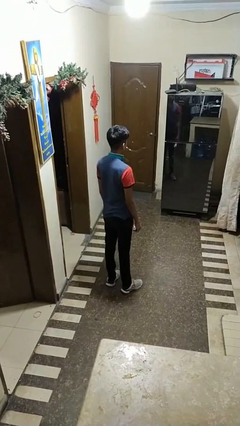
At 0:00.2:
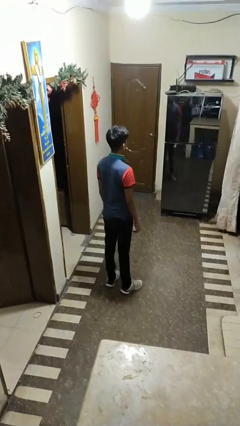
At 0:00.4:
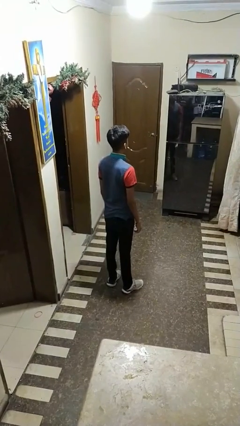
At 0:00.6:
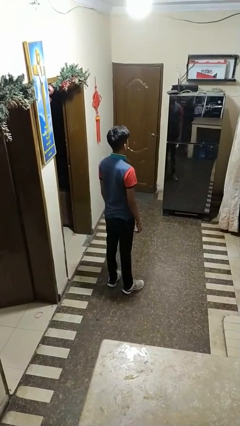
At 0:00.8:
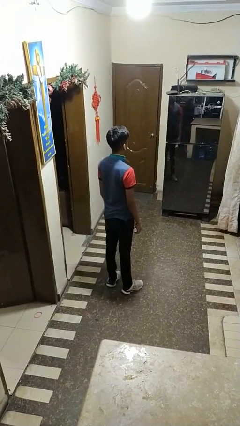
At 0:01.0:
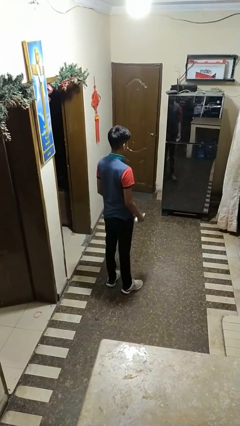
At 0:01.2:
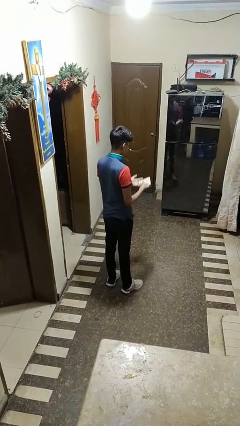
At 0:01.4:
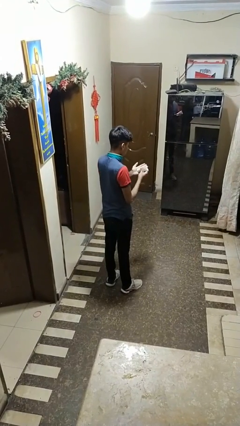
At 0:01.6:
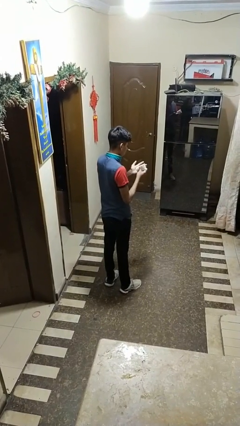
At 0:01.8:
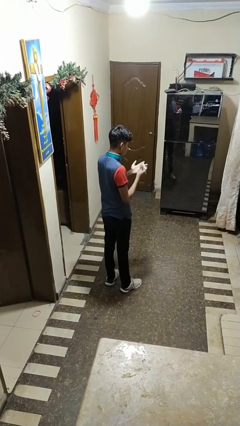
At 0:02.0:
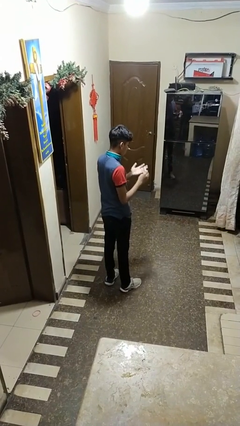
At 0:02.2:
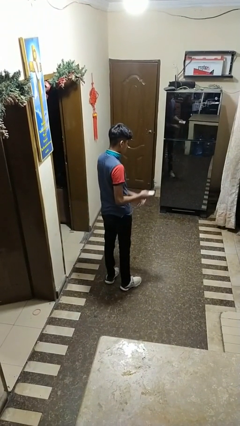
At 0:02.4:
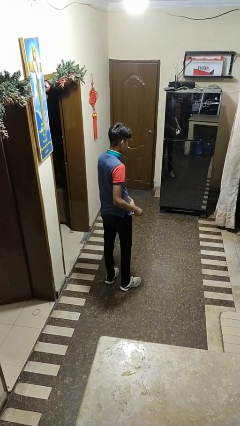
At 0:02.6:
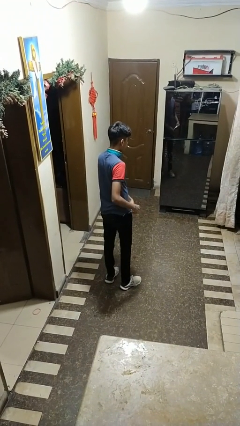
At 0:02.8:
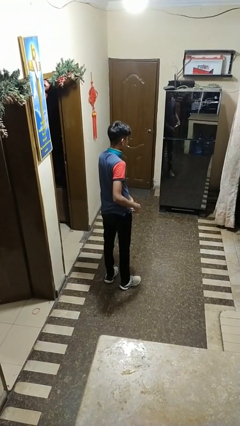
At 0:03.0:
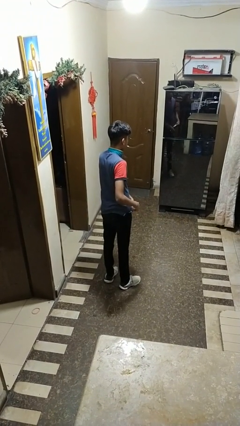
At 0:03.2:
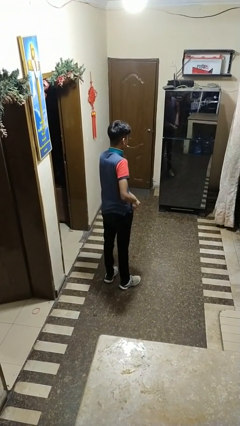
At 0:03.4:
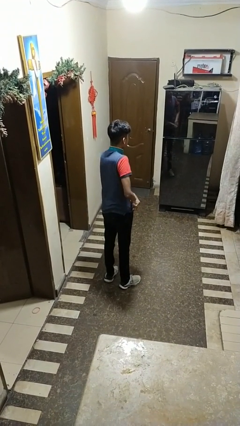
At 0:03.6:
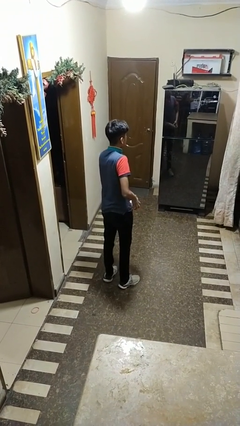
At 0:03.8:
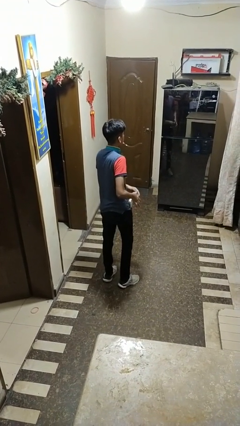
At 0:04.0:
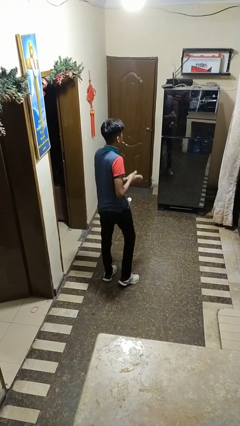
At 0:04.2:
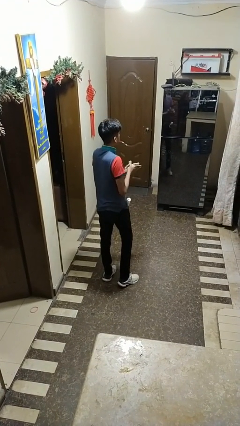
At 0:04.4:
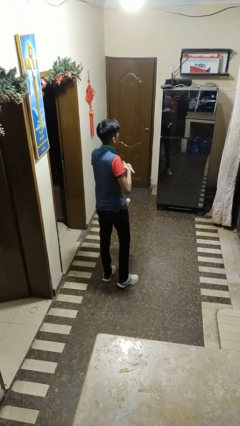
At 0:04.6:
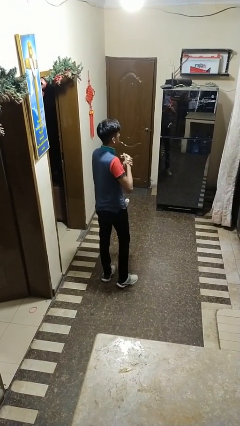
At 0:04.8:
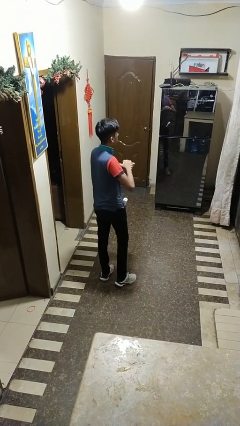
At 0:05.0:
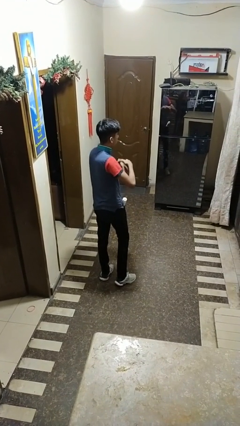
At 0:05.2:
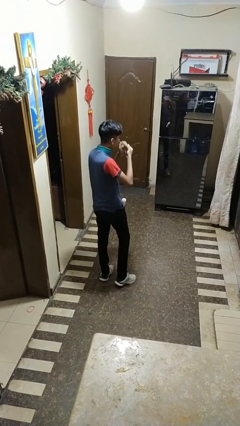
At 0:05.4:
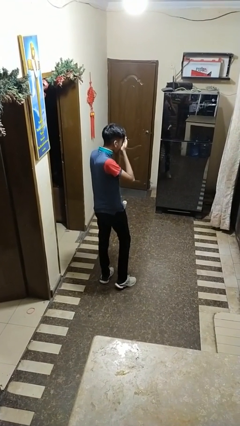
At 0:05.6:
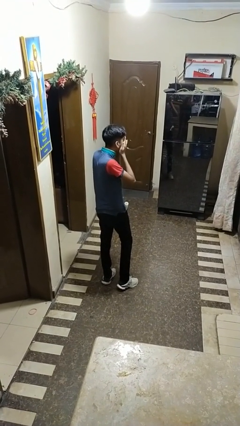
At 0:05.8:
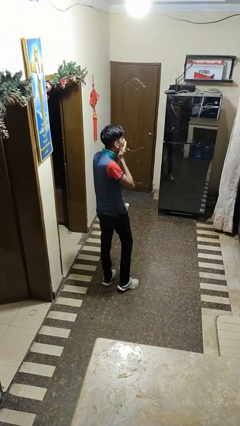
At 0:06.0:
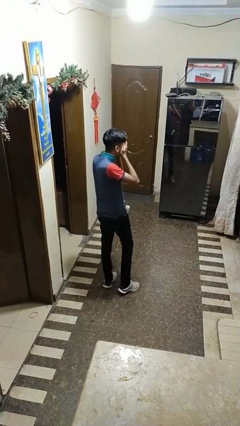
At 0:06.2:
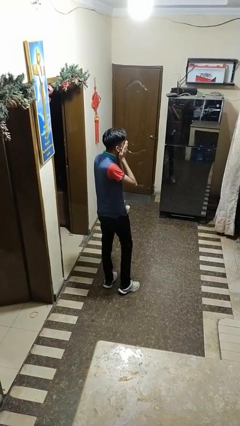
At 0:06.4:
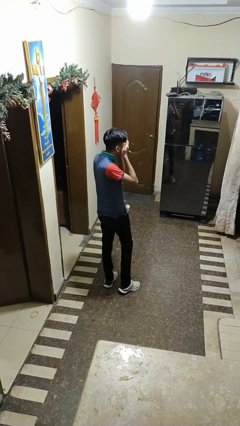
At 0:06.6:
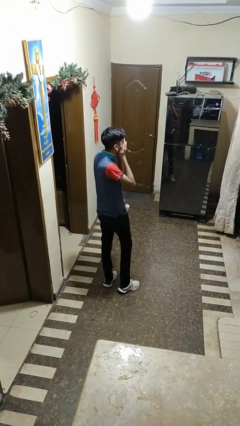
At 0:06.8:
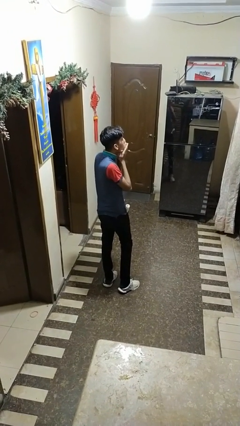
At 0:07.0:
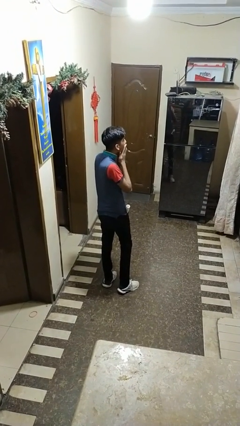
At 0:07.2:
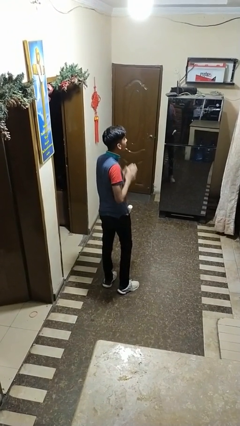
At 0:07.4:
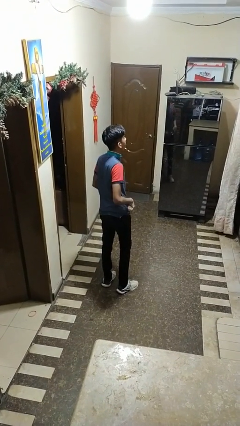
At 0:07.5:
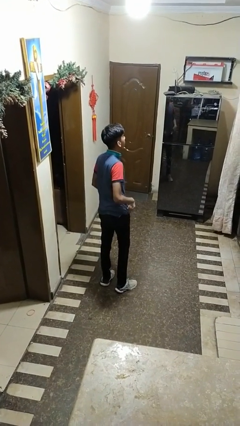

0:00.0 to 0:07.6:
person applies facial moisturizer

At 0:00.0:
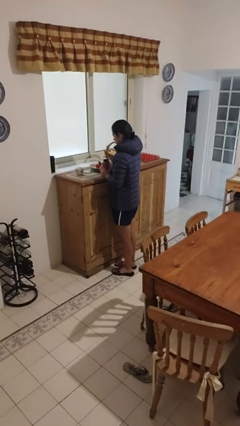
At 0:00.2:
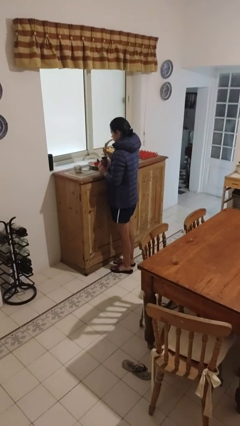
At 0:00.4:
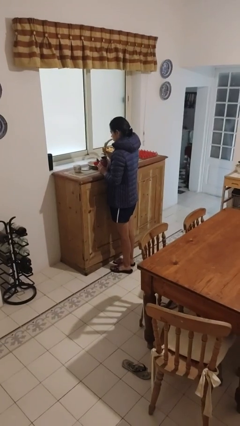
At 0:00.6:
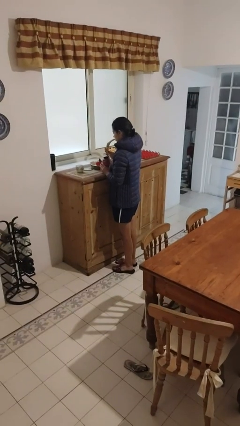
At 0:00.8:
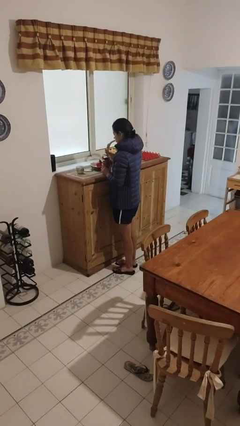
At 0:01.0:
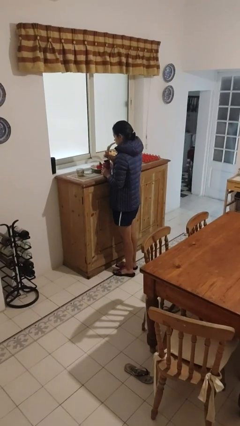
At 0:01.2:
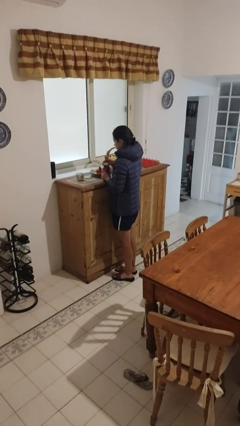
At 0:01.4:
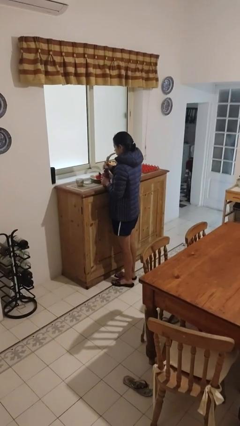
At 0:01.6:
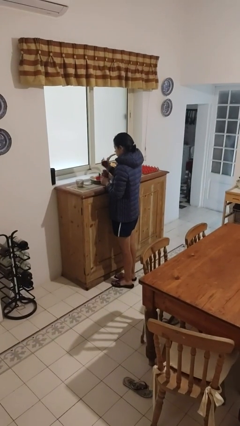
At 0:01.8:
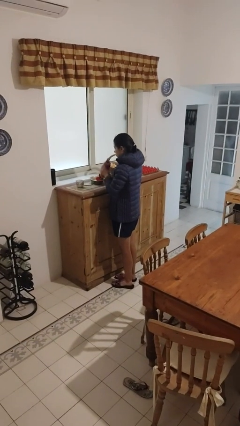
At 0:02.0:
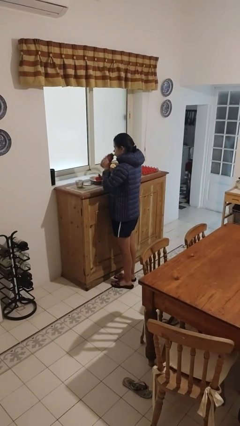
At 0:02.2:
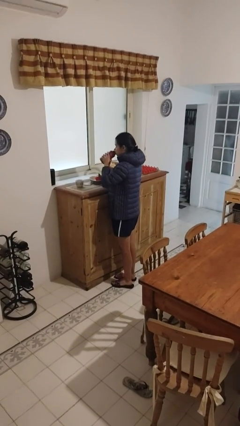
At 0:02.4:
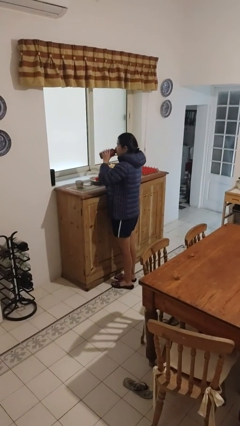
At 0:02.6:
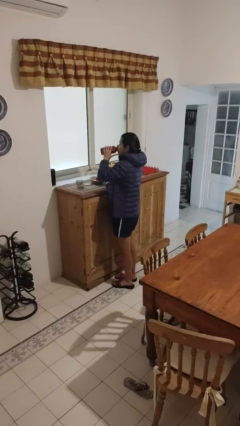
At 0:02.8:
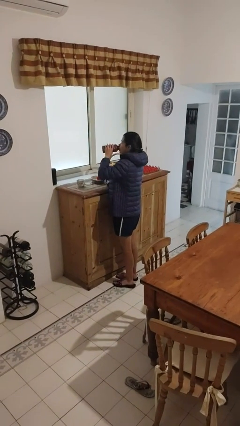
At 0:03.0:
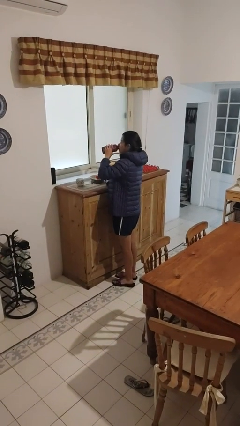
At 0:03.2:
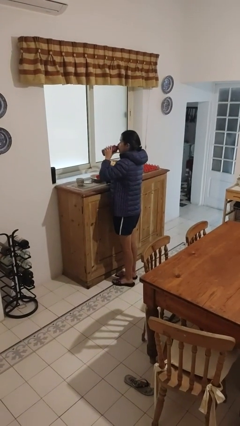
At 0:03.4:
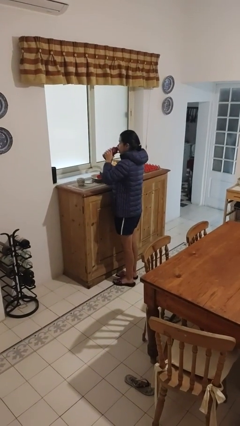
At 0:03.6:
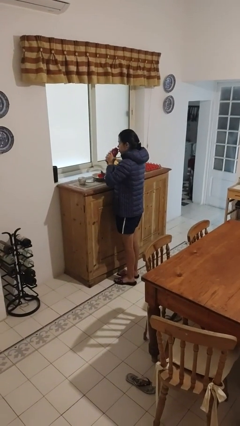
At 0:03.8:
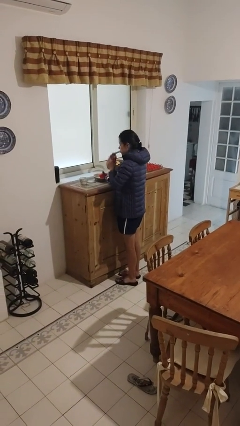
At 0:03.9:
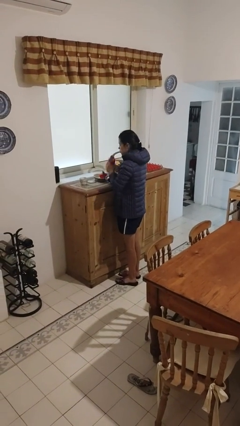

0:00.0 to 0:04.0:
person drinks from bottle

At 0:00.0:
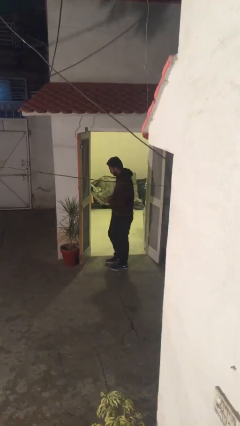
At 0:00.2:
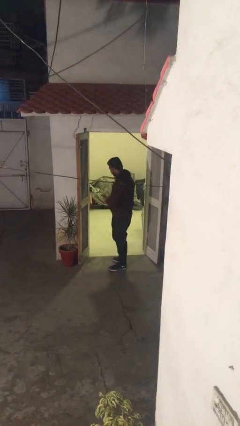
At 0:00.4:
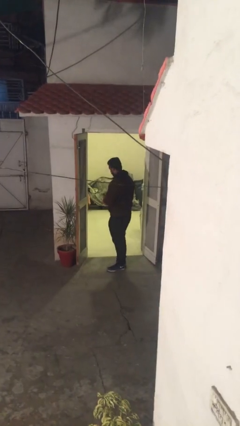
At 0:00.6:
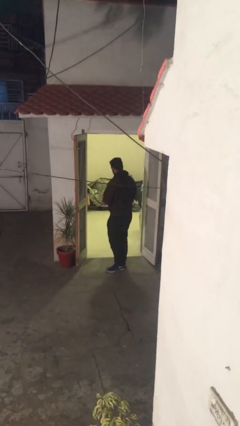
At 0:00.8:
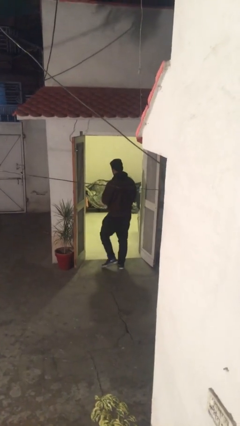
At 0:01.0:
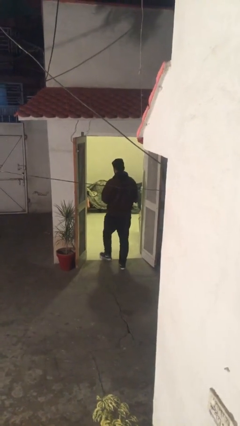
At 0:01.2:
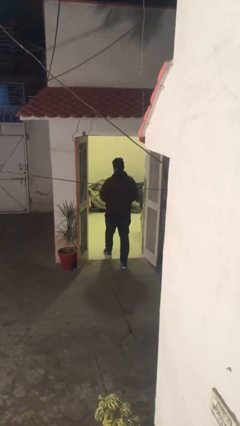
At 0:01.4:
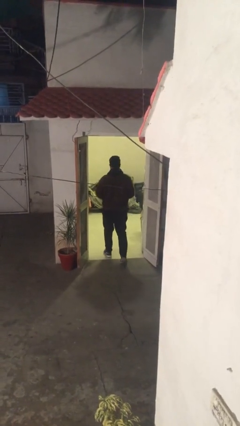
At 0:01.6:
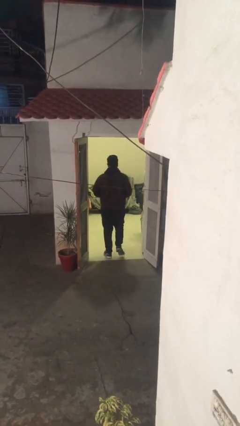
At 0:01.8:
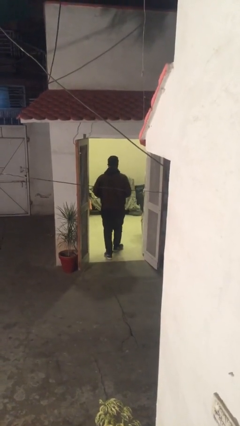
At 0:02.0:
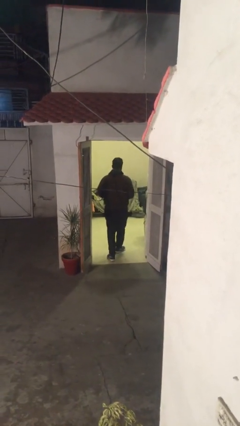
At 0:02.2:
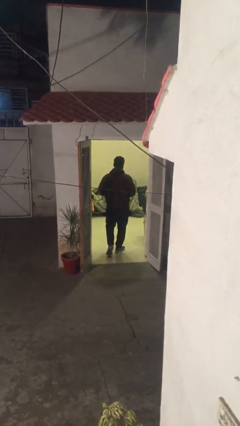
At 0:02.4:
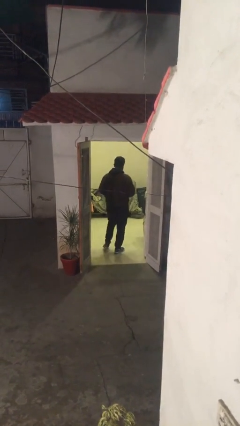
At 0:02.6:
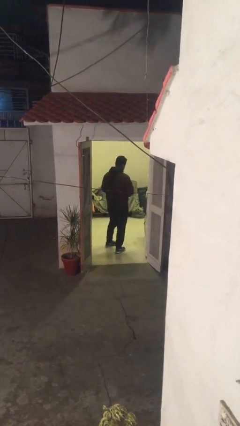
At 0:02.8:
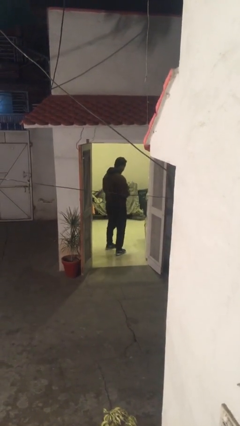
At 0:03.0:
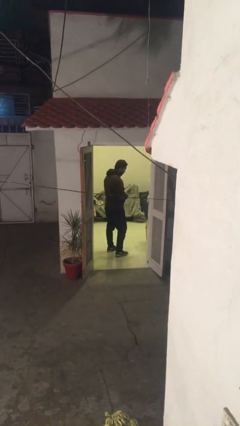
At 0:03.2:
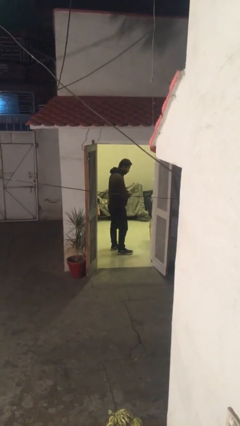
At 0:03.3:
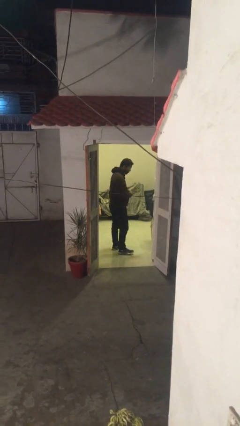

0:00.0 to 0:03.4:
person exits scene through structure

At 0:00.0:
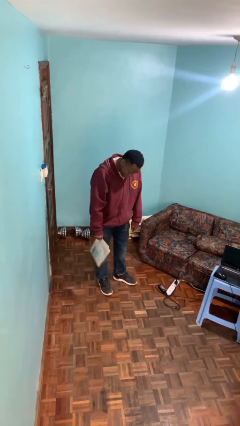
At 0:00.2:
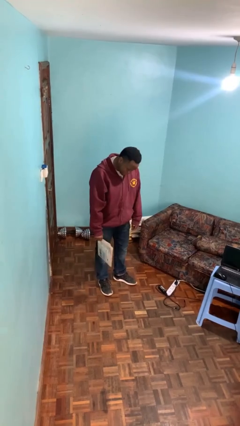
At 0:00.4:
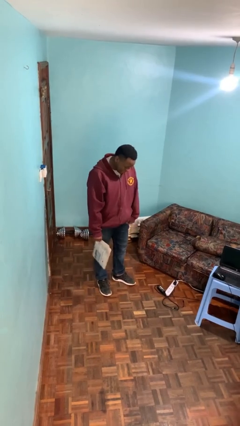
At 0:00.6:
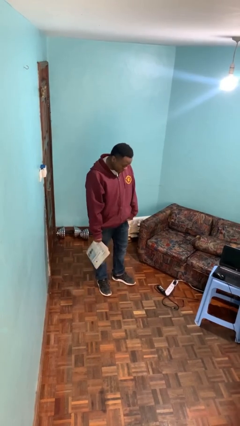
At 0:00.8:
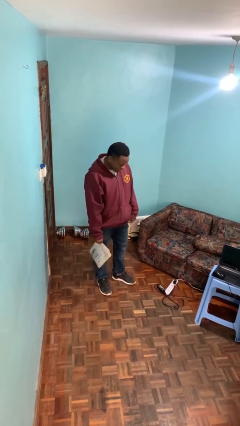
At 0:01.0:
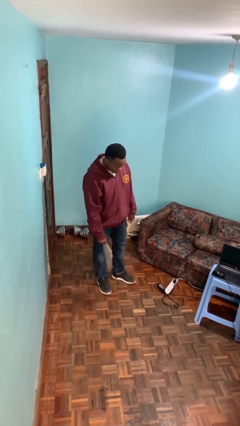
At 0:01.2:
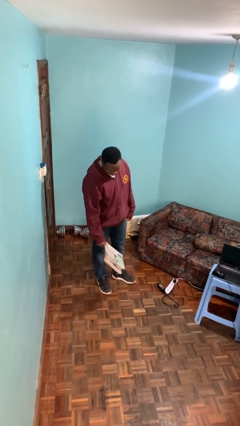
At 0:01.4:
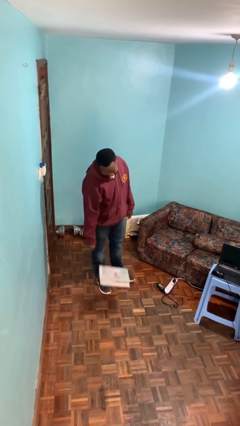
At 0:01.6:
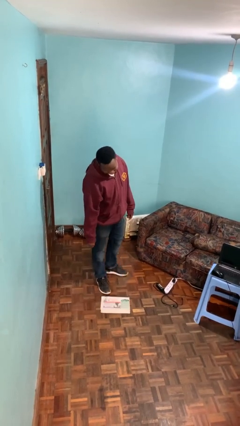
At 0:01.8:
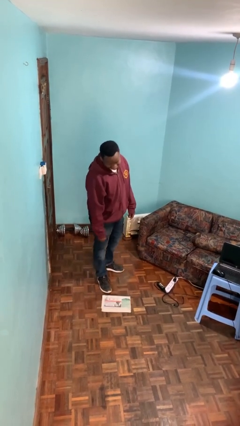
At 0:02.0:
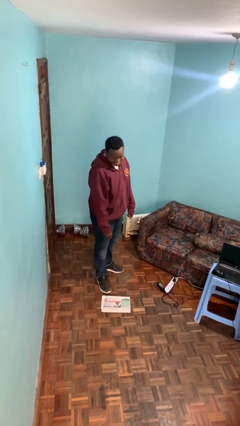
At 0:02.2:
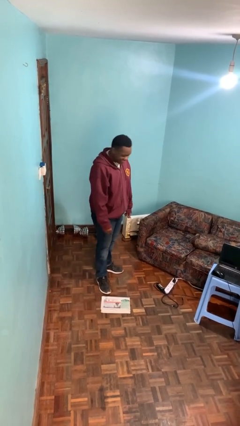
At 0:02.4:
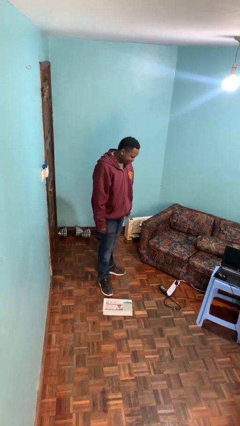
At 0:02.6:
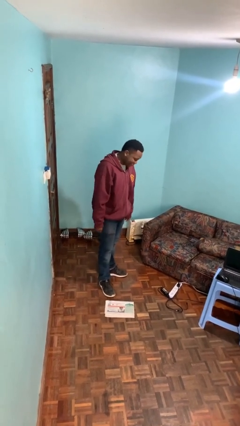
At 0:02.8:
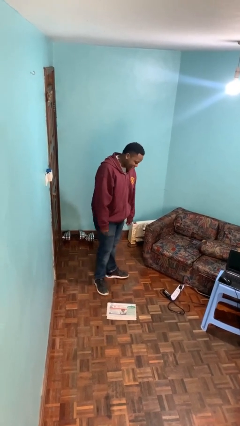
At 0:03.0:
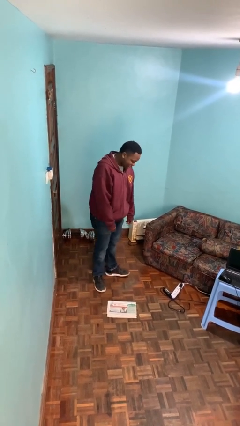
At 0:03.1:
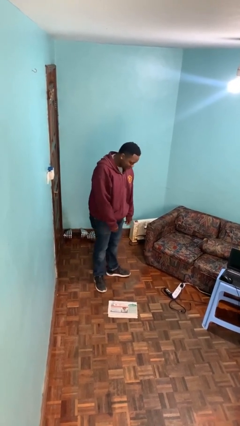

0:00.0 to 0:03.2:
person drops object
